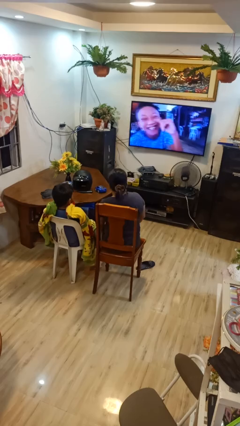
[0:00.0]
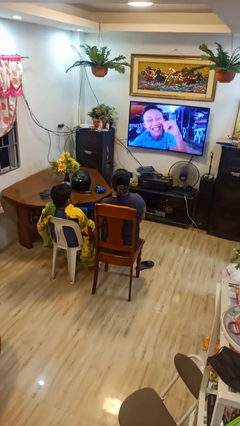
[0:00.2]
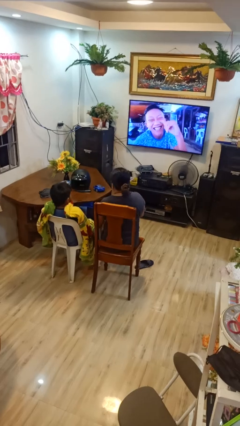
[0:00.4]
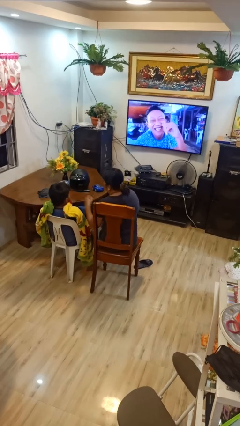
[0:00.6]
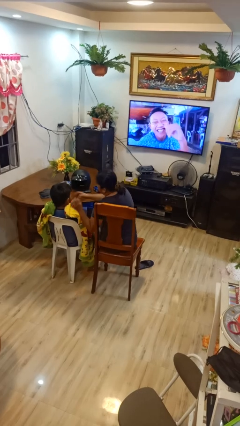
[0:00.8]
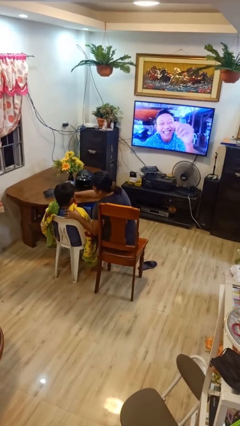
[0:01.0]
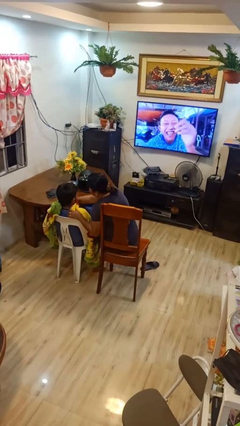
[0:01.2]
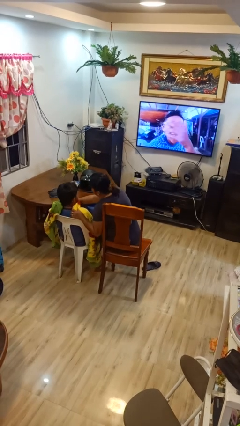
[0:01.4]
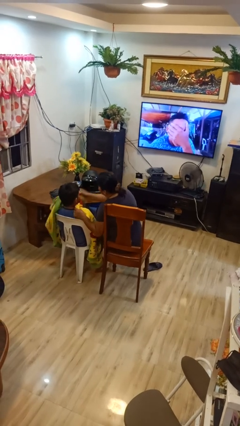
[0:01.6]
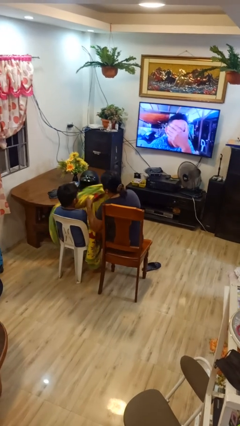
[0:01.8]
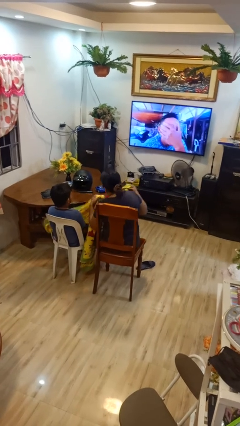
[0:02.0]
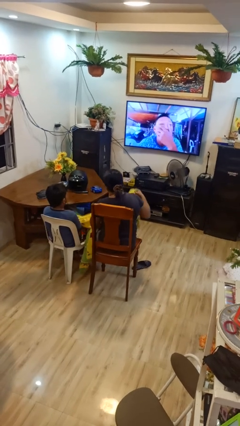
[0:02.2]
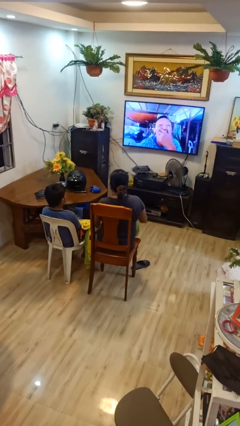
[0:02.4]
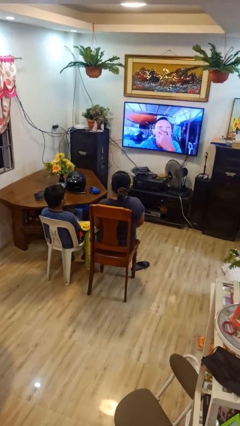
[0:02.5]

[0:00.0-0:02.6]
person uncovers friend with blanket

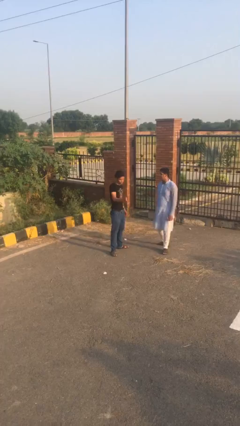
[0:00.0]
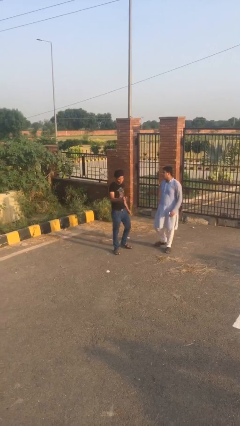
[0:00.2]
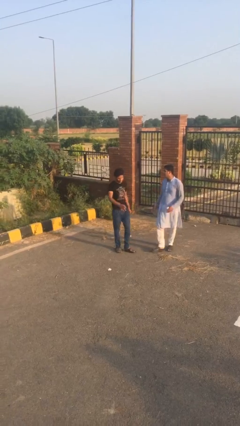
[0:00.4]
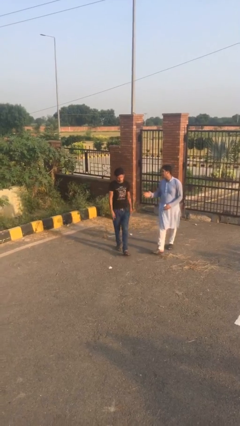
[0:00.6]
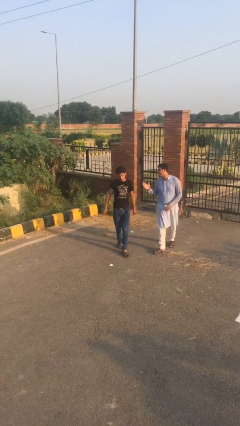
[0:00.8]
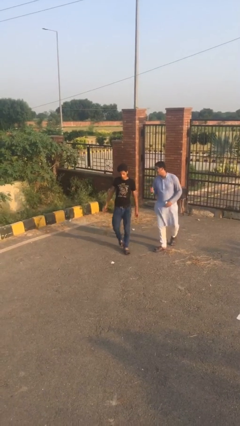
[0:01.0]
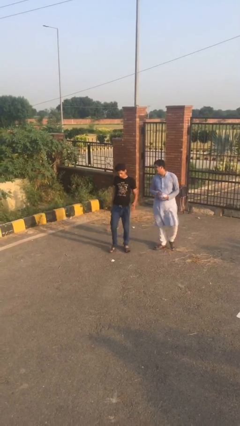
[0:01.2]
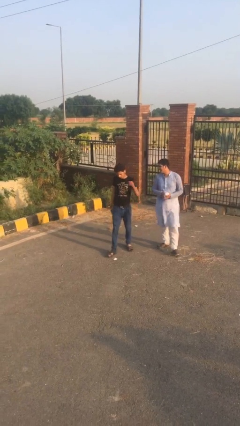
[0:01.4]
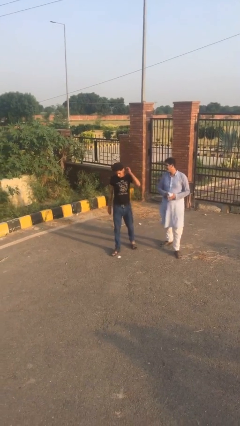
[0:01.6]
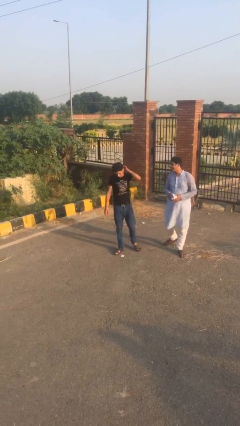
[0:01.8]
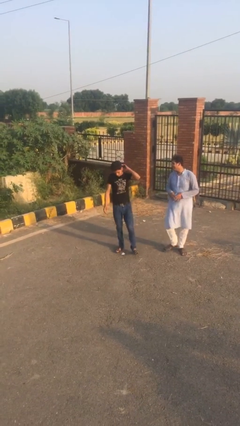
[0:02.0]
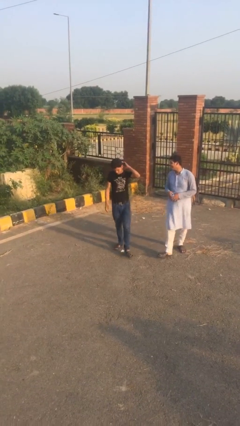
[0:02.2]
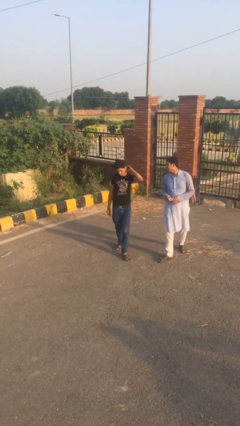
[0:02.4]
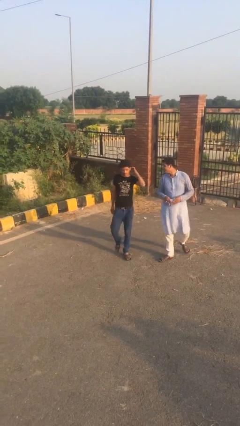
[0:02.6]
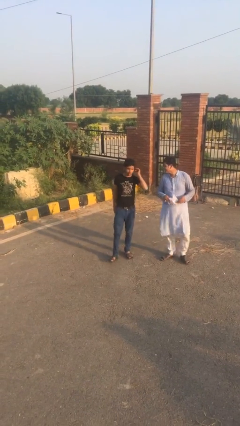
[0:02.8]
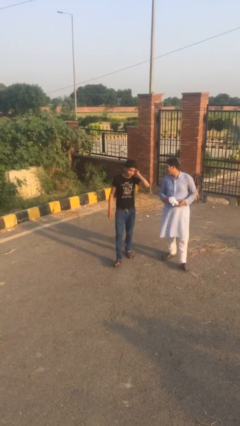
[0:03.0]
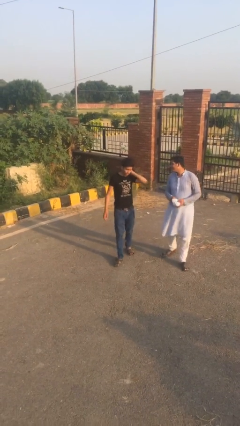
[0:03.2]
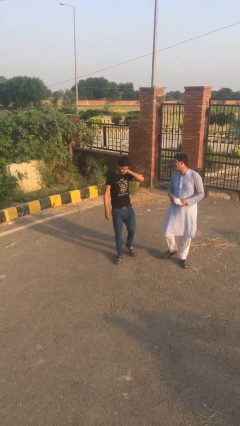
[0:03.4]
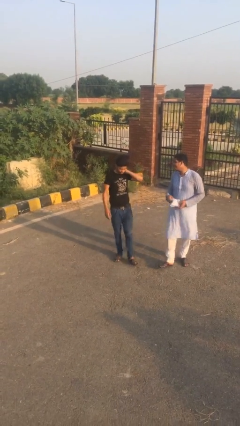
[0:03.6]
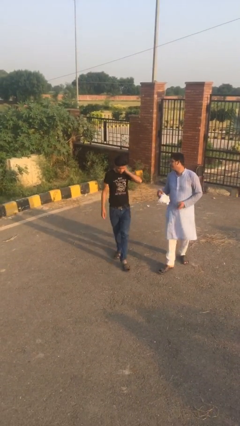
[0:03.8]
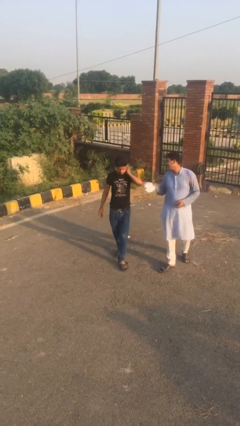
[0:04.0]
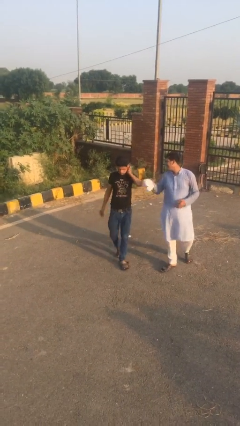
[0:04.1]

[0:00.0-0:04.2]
person talks to person

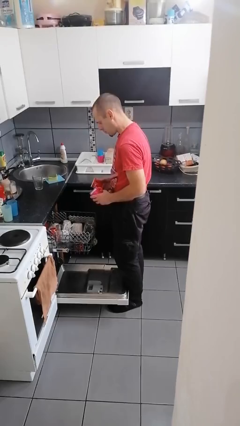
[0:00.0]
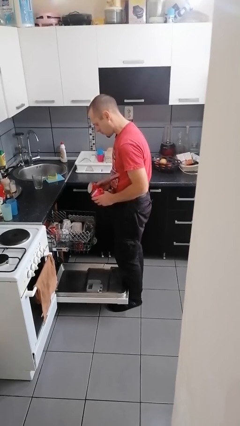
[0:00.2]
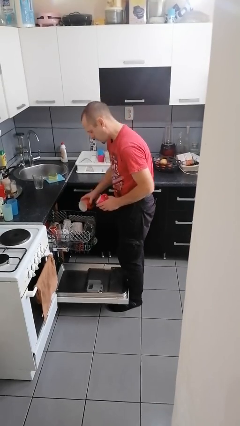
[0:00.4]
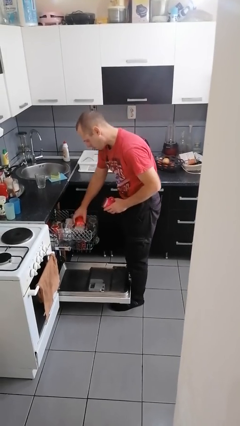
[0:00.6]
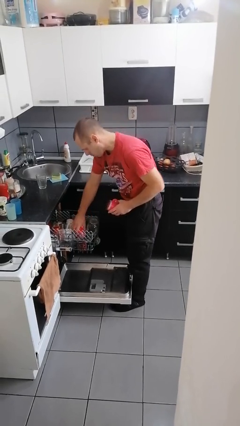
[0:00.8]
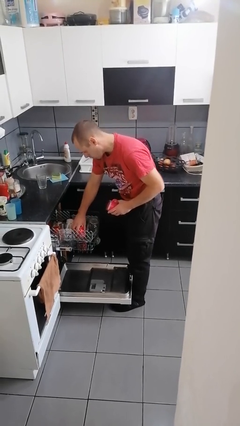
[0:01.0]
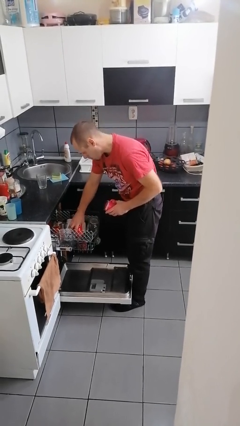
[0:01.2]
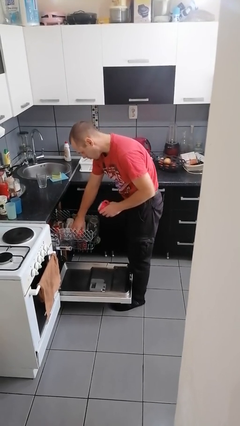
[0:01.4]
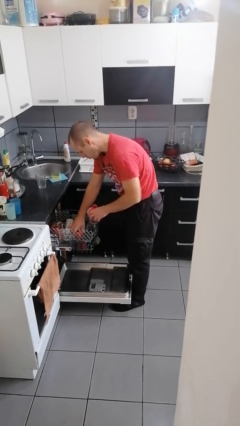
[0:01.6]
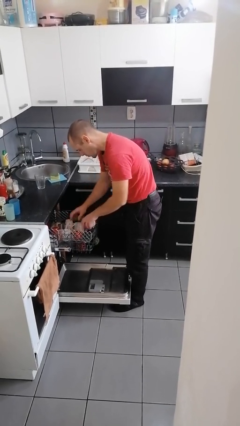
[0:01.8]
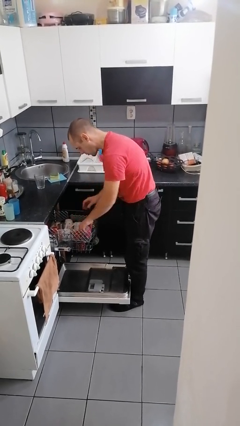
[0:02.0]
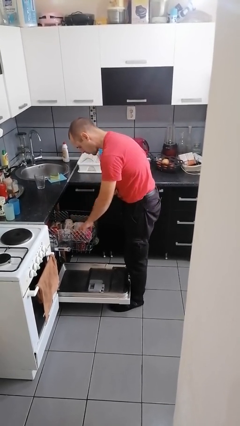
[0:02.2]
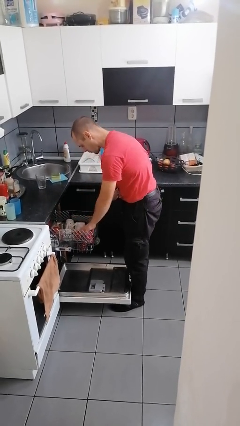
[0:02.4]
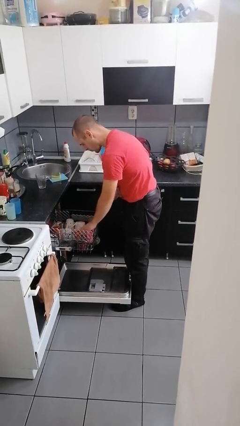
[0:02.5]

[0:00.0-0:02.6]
person loads dishwasher

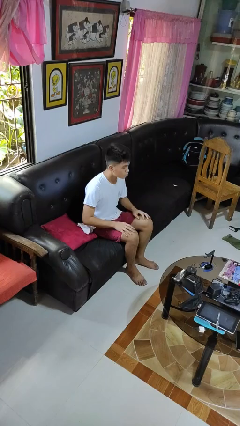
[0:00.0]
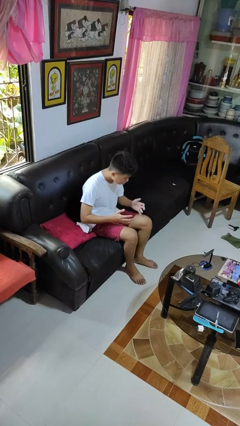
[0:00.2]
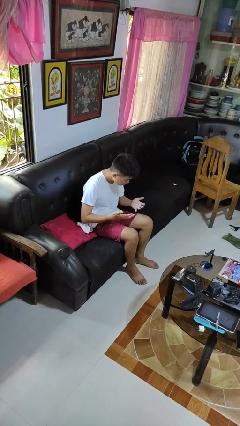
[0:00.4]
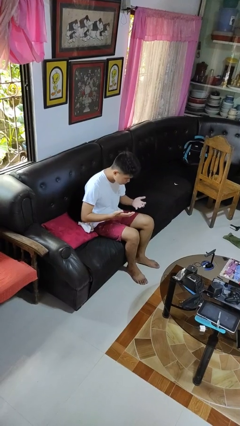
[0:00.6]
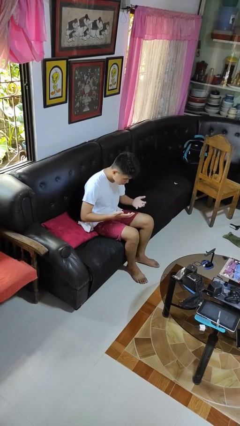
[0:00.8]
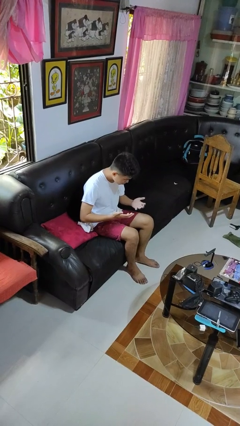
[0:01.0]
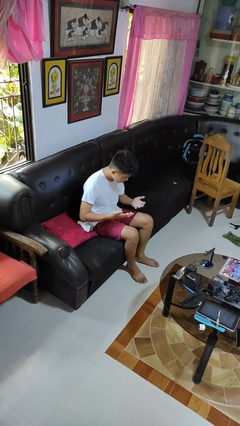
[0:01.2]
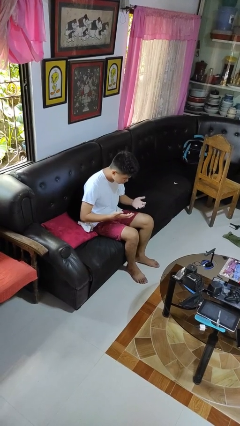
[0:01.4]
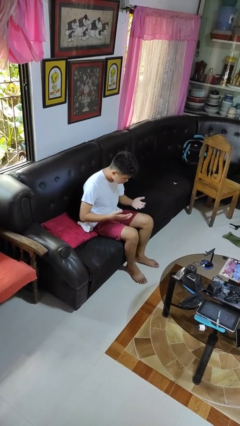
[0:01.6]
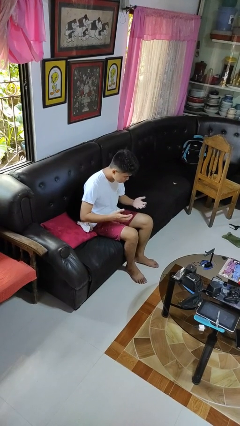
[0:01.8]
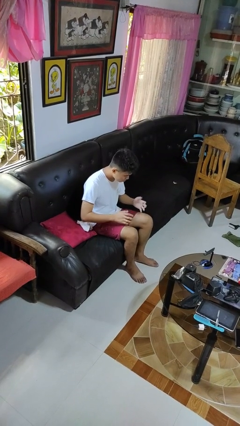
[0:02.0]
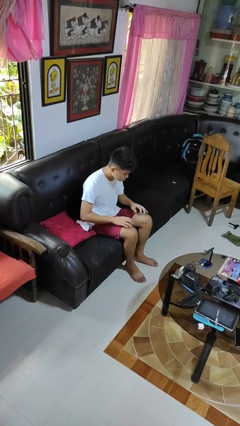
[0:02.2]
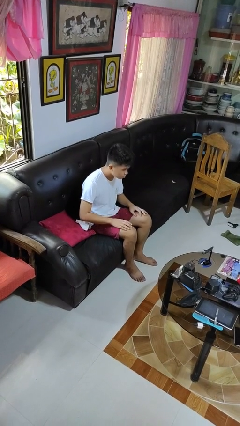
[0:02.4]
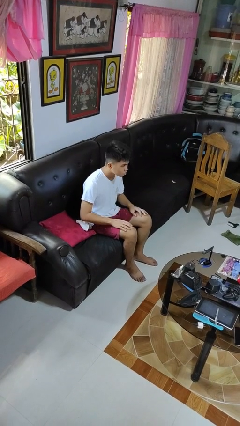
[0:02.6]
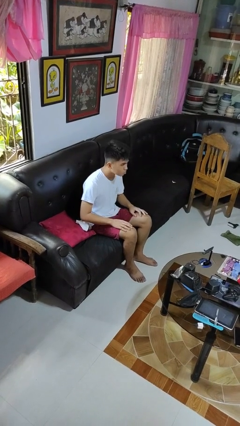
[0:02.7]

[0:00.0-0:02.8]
person looks at hands in lap

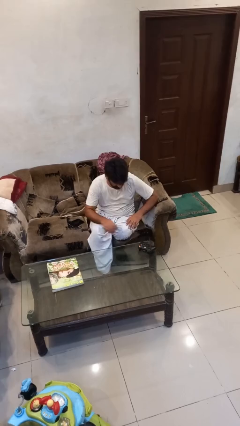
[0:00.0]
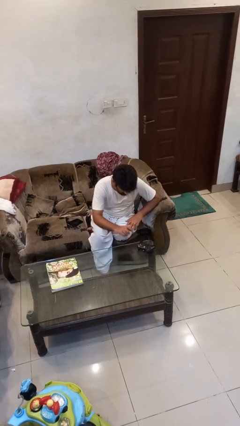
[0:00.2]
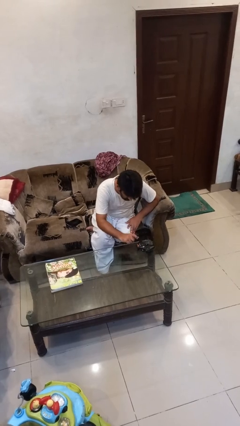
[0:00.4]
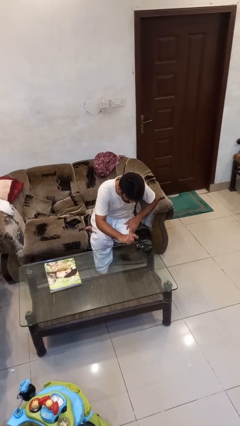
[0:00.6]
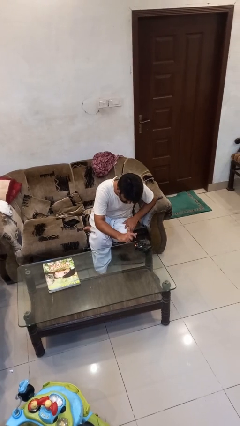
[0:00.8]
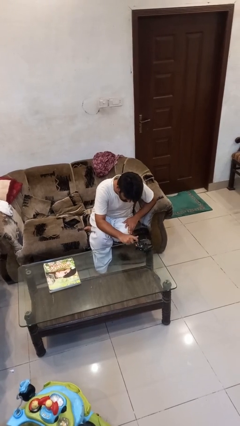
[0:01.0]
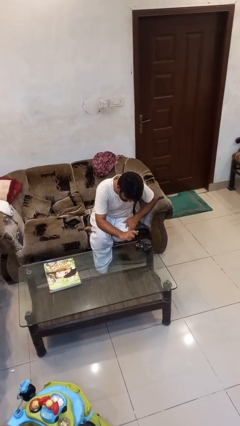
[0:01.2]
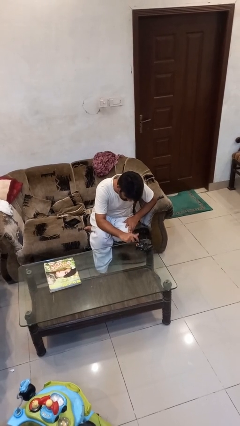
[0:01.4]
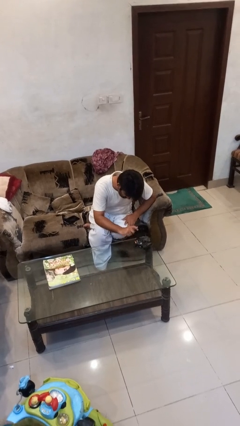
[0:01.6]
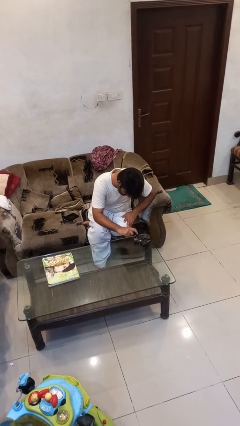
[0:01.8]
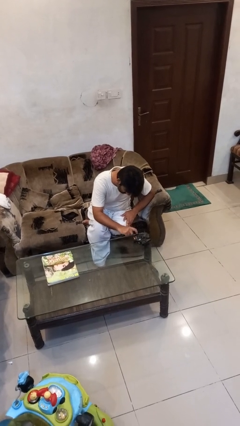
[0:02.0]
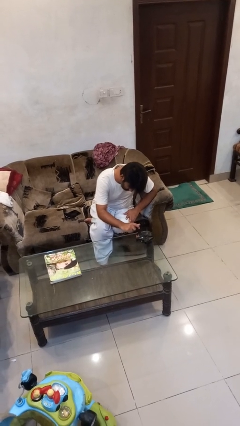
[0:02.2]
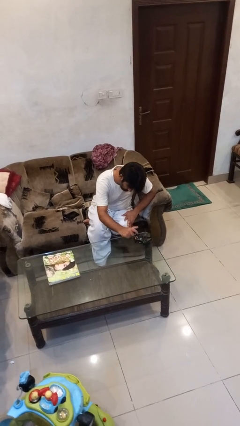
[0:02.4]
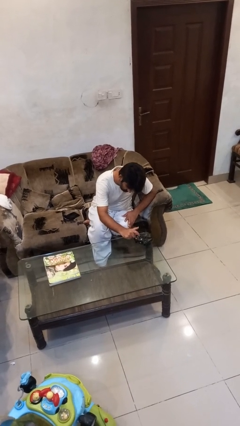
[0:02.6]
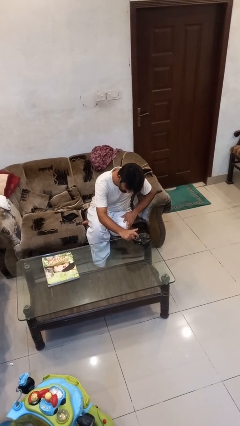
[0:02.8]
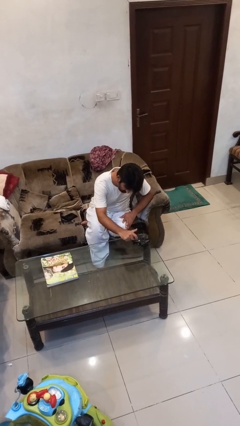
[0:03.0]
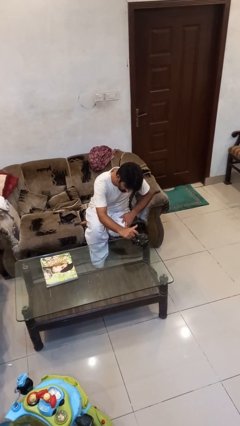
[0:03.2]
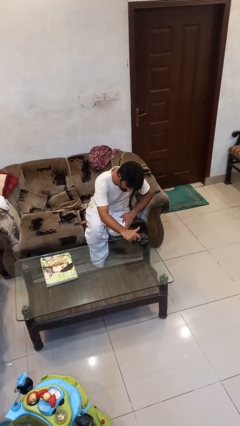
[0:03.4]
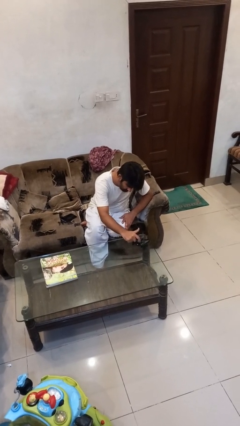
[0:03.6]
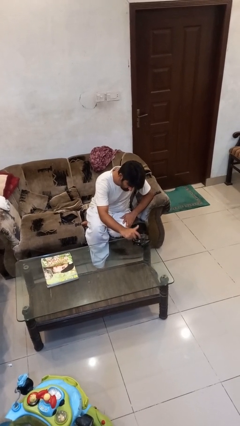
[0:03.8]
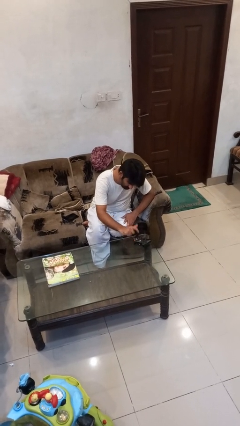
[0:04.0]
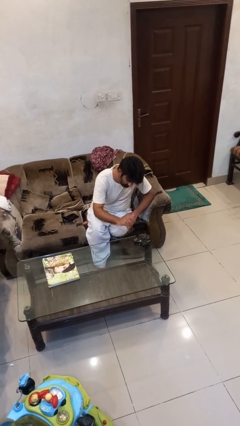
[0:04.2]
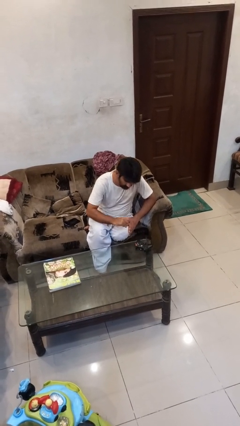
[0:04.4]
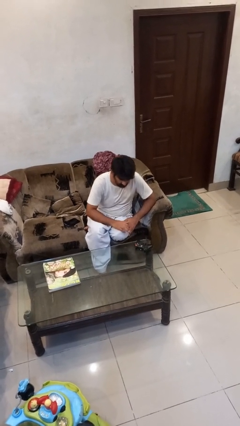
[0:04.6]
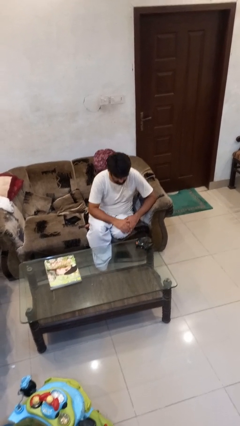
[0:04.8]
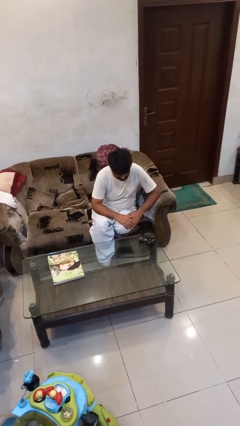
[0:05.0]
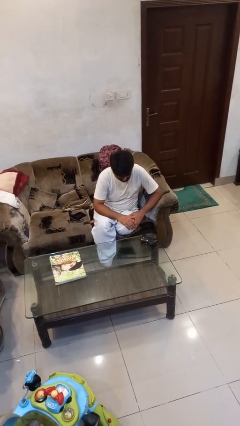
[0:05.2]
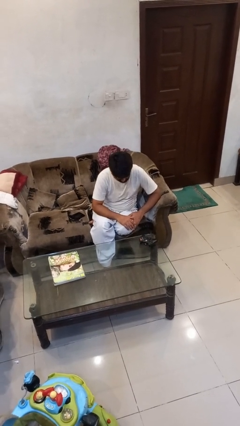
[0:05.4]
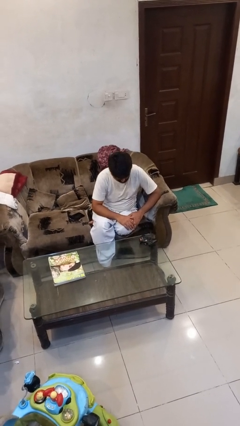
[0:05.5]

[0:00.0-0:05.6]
person taps object with finger
